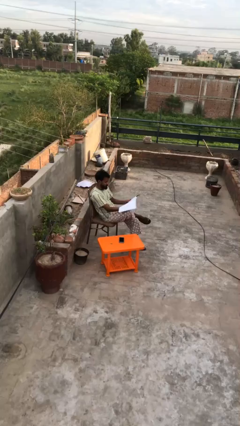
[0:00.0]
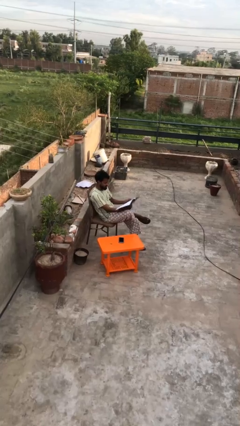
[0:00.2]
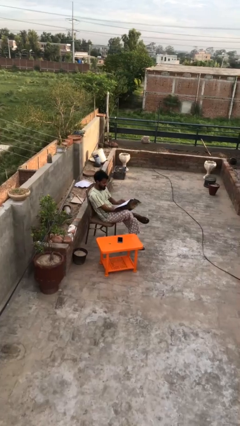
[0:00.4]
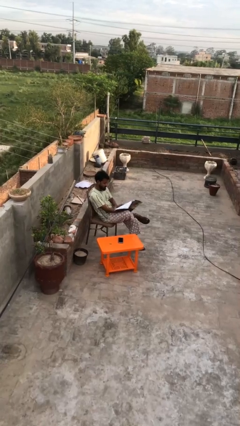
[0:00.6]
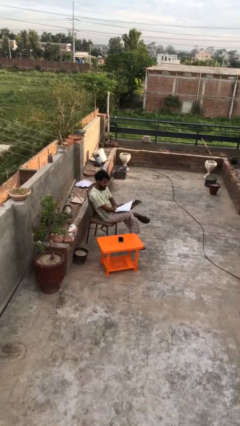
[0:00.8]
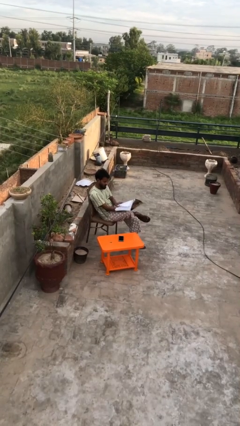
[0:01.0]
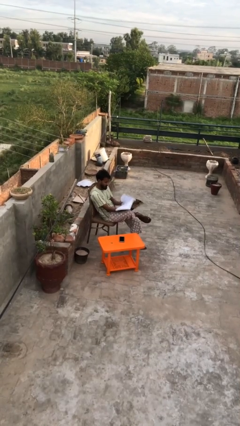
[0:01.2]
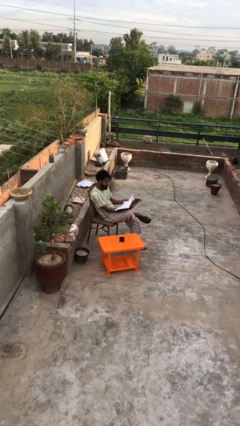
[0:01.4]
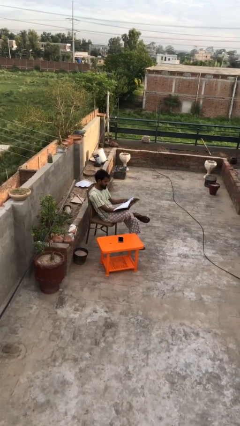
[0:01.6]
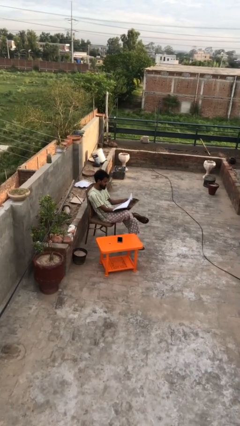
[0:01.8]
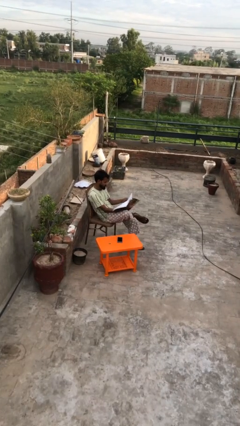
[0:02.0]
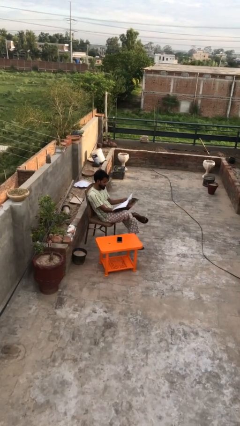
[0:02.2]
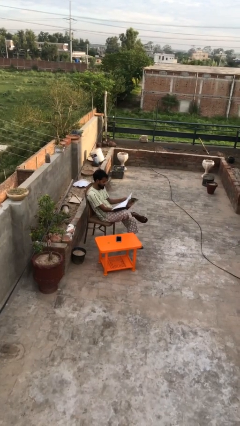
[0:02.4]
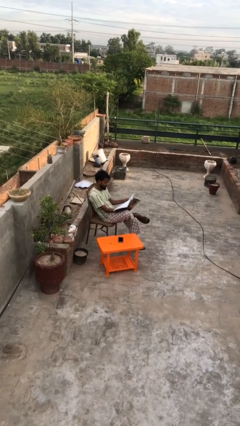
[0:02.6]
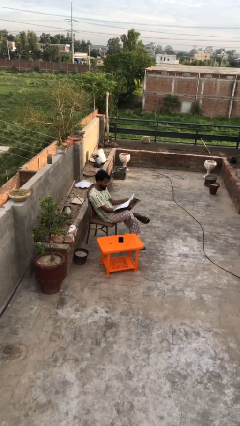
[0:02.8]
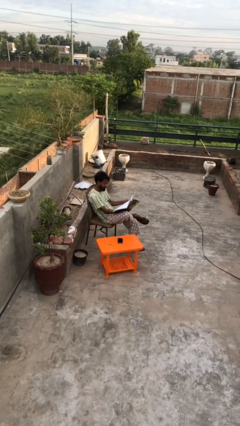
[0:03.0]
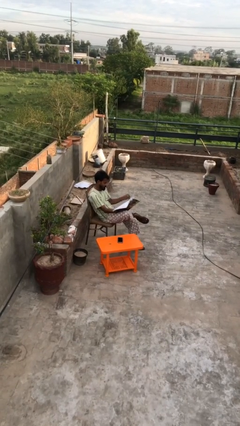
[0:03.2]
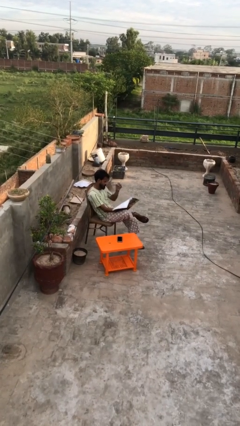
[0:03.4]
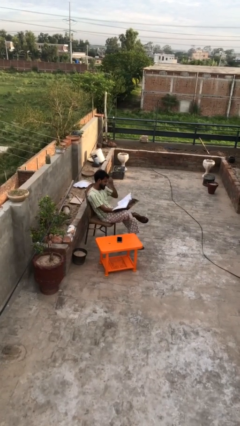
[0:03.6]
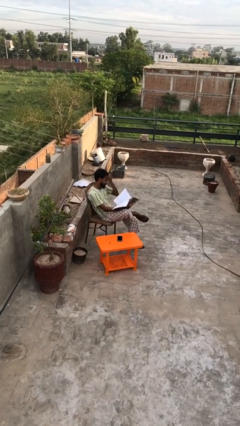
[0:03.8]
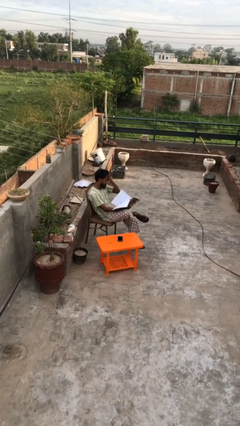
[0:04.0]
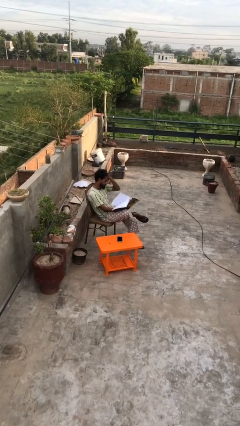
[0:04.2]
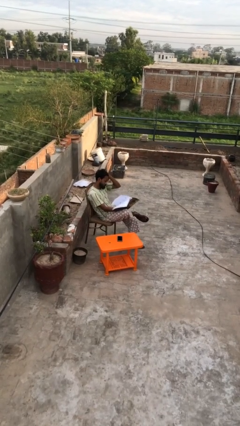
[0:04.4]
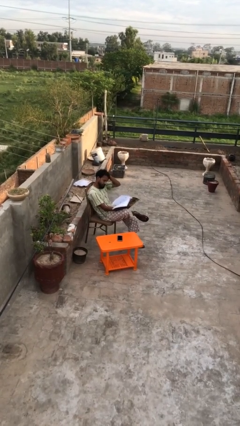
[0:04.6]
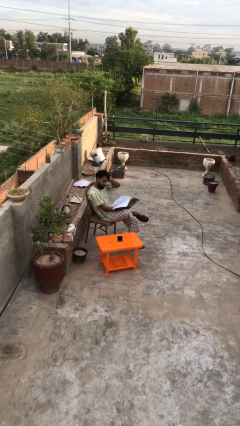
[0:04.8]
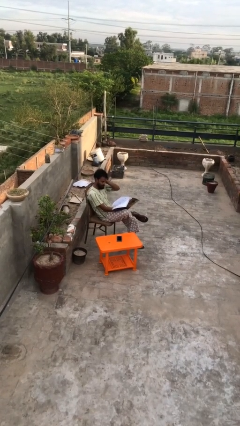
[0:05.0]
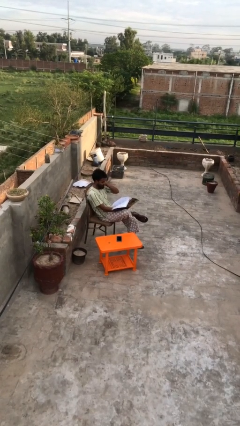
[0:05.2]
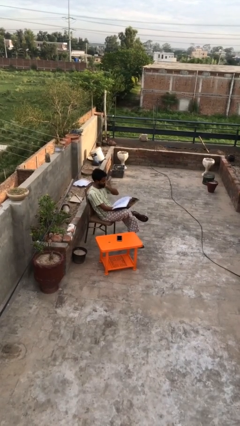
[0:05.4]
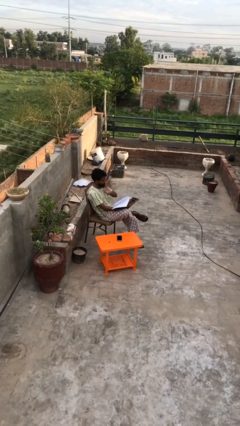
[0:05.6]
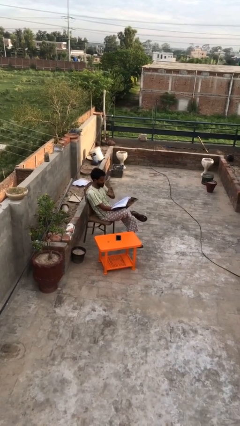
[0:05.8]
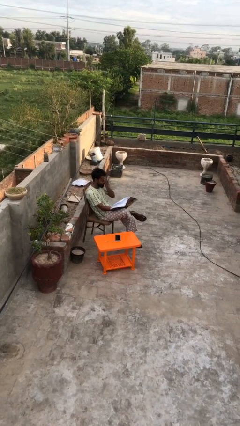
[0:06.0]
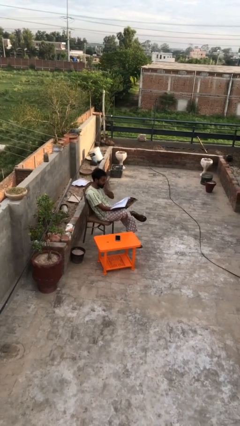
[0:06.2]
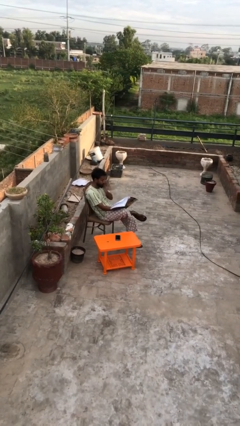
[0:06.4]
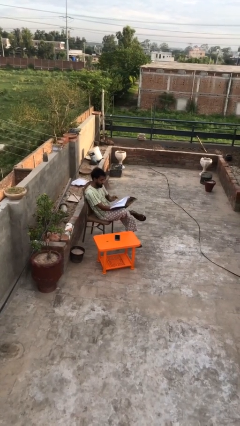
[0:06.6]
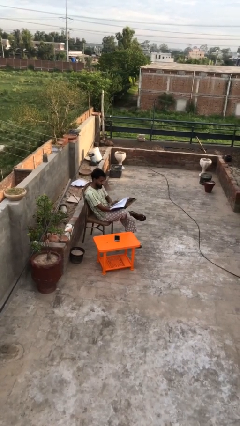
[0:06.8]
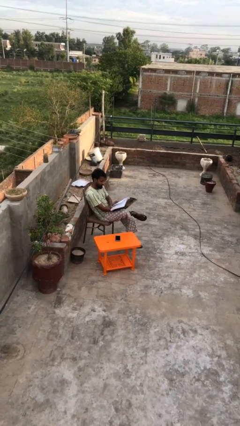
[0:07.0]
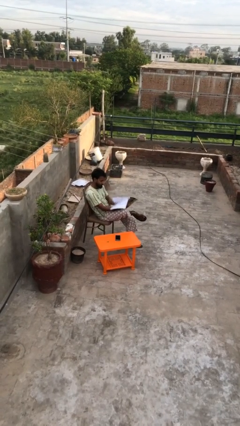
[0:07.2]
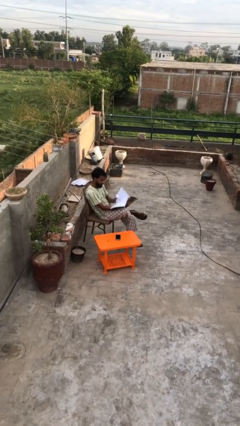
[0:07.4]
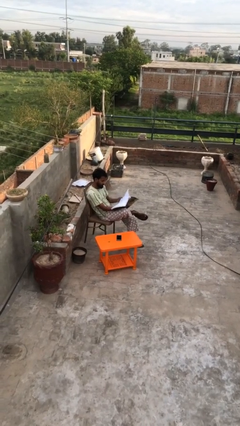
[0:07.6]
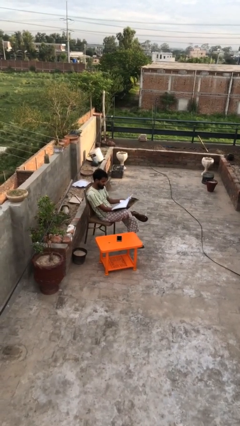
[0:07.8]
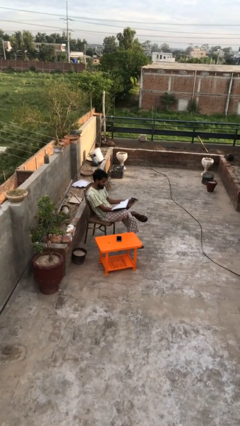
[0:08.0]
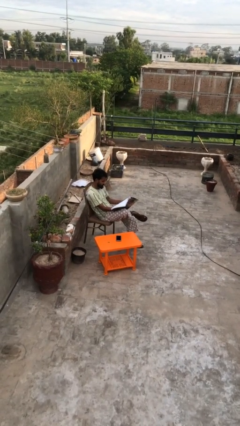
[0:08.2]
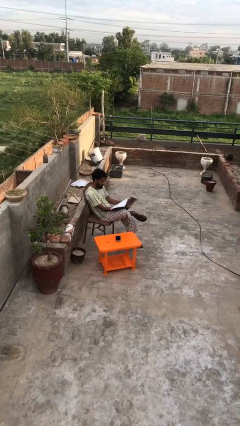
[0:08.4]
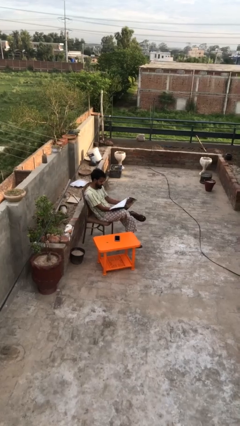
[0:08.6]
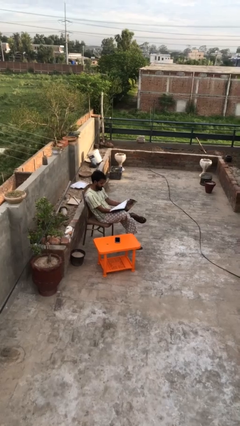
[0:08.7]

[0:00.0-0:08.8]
person reads document

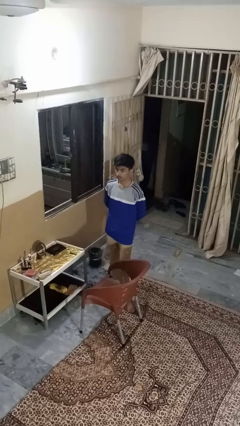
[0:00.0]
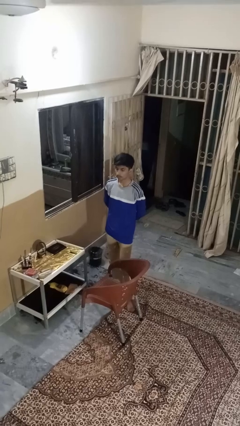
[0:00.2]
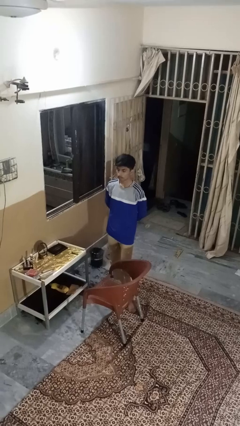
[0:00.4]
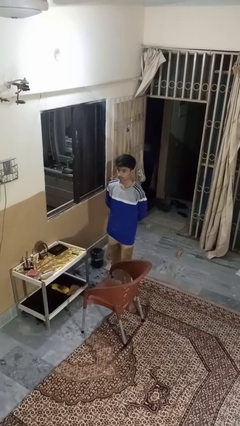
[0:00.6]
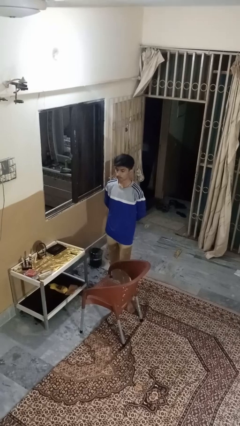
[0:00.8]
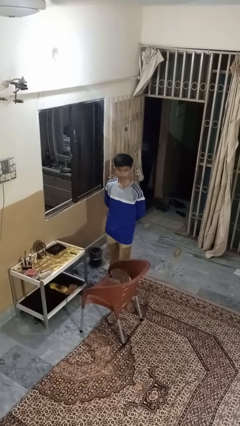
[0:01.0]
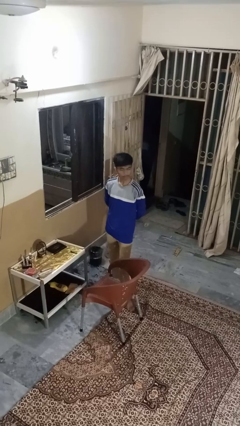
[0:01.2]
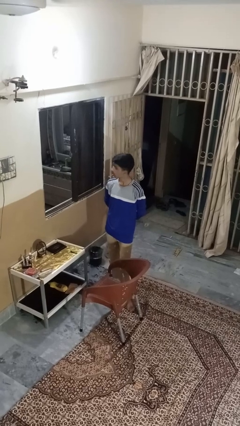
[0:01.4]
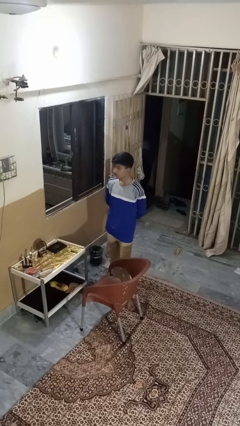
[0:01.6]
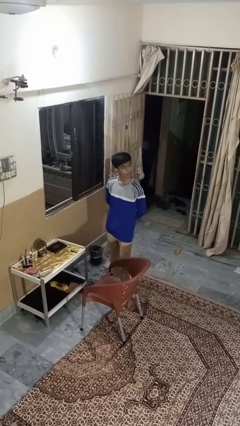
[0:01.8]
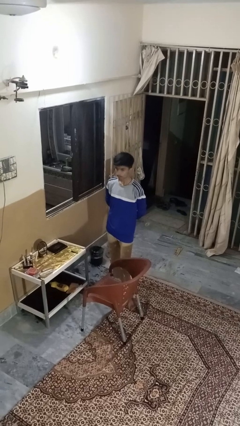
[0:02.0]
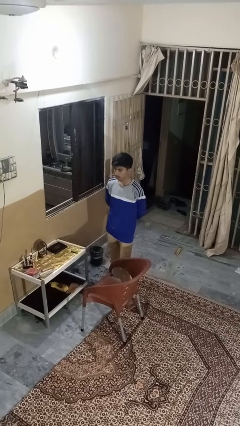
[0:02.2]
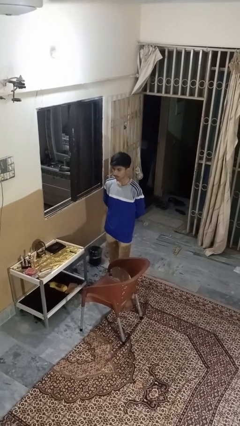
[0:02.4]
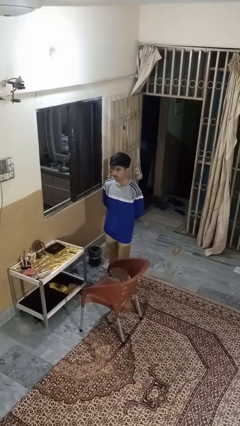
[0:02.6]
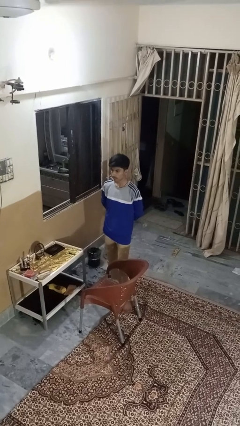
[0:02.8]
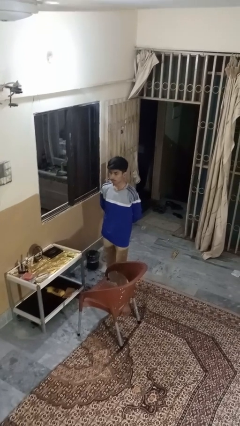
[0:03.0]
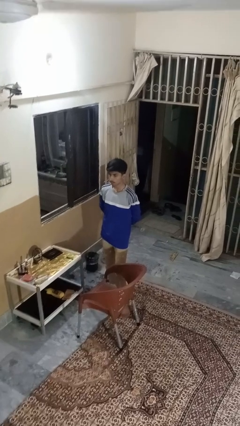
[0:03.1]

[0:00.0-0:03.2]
person shakes head

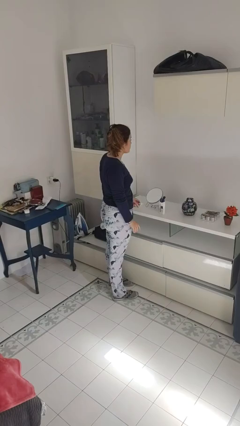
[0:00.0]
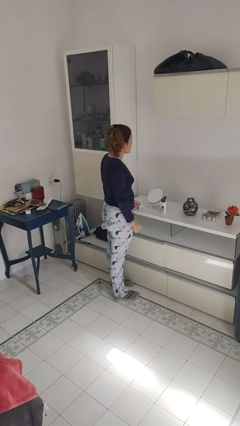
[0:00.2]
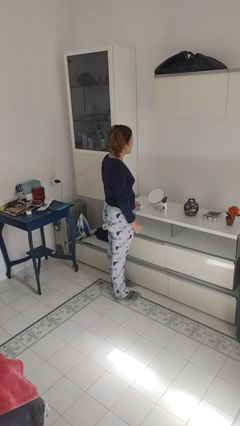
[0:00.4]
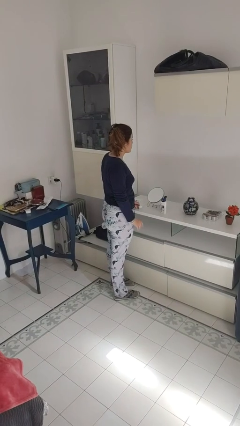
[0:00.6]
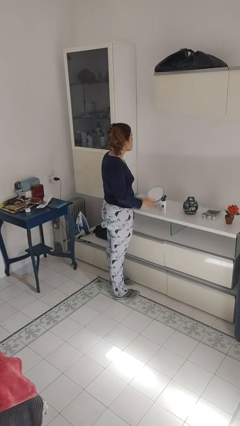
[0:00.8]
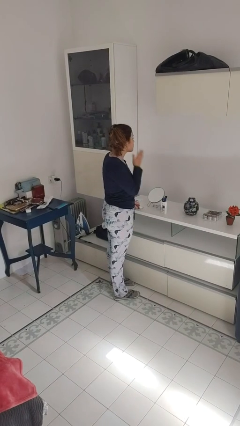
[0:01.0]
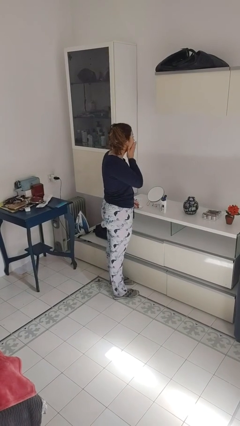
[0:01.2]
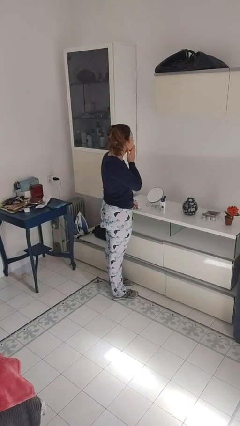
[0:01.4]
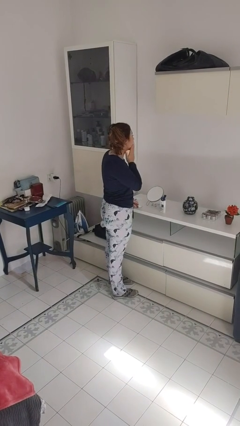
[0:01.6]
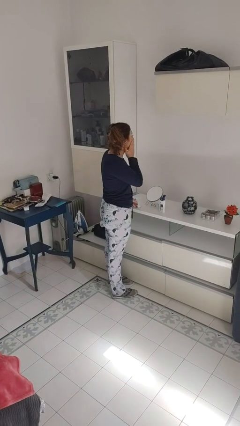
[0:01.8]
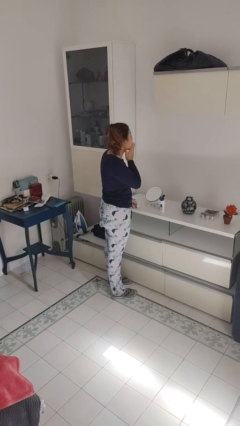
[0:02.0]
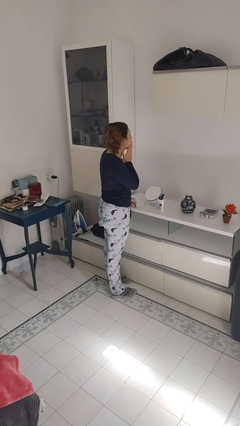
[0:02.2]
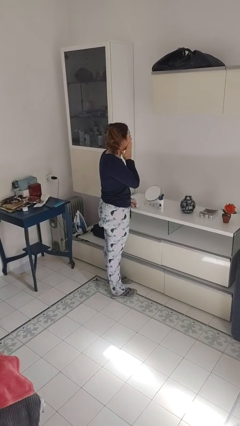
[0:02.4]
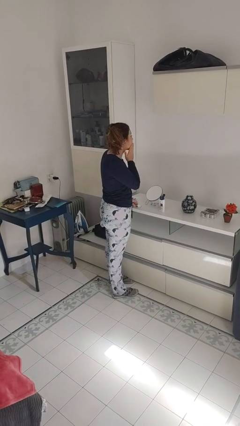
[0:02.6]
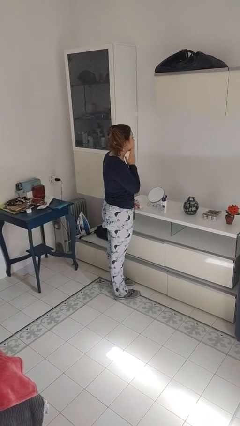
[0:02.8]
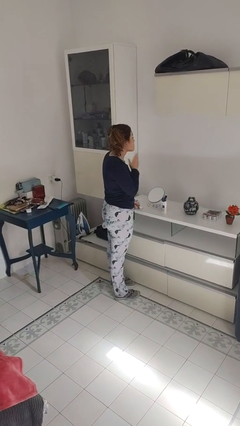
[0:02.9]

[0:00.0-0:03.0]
person applies shaving cream

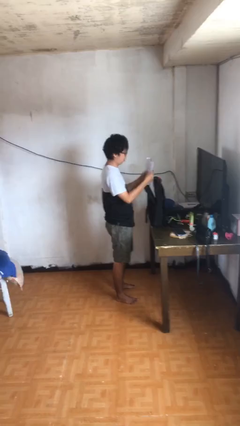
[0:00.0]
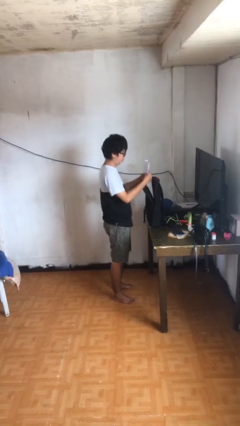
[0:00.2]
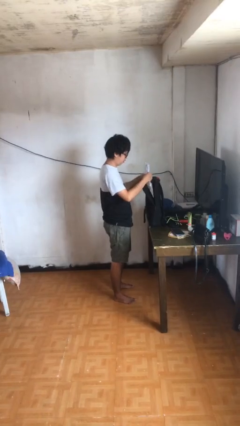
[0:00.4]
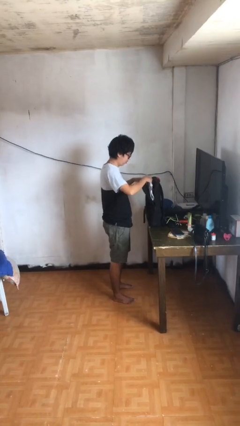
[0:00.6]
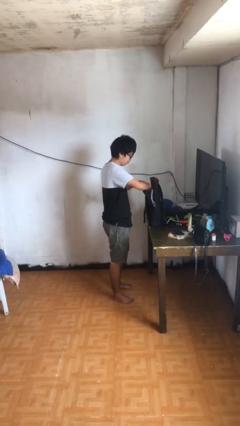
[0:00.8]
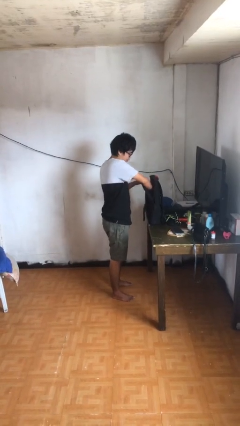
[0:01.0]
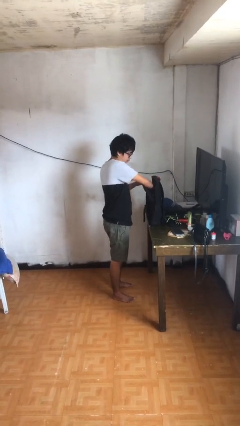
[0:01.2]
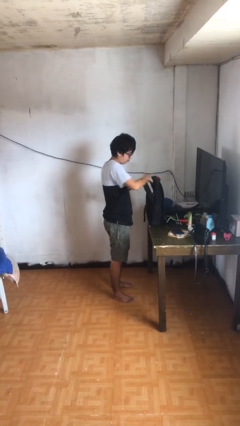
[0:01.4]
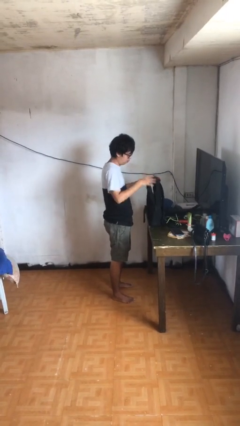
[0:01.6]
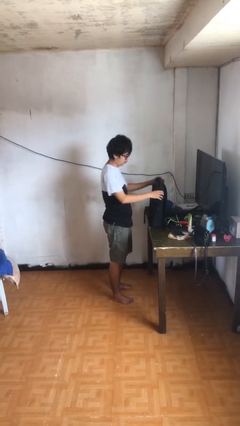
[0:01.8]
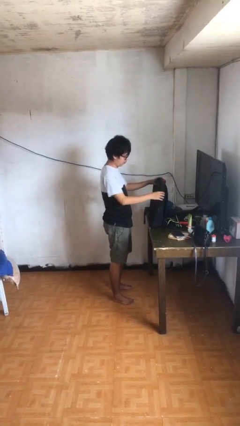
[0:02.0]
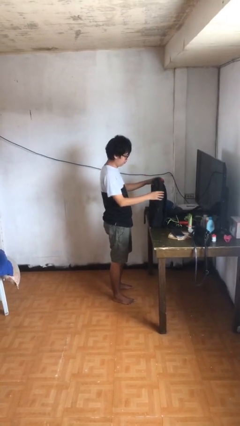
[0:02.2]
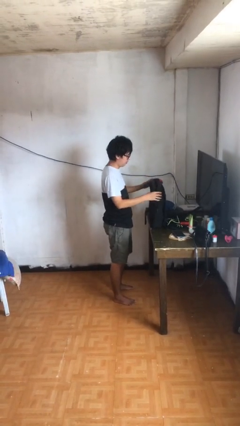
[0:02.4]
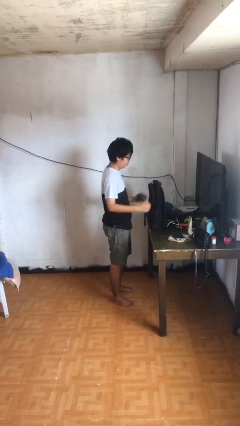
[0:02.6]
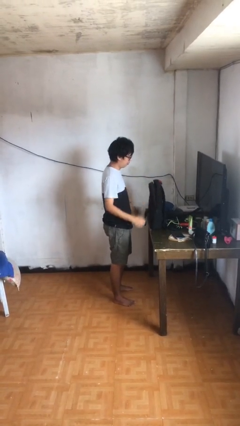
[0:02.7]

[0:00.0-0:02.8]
person puts object into backpack
